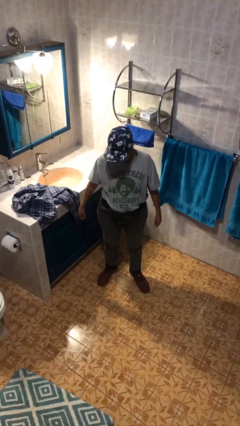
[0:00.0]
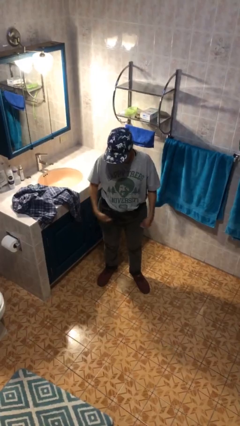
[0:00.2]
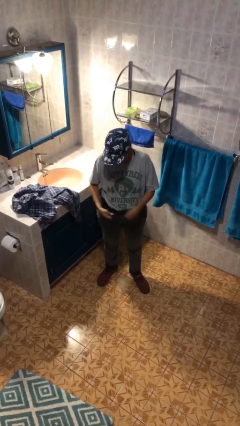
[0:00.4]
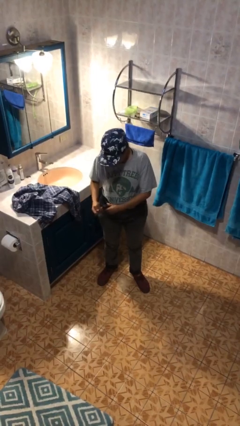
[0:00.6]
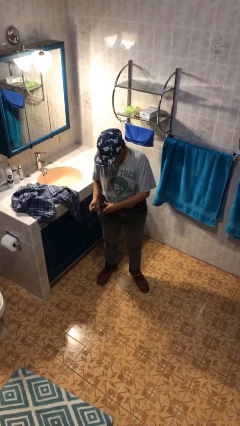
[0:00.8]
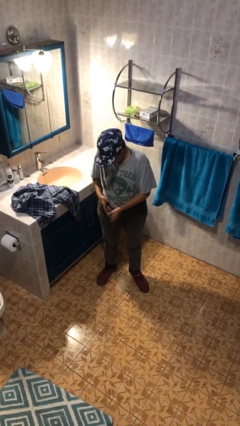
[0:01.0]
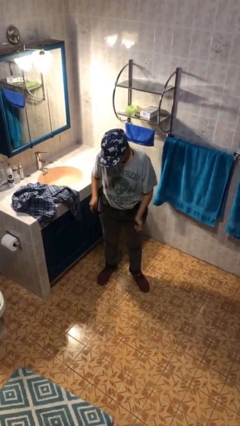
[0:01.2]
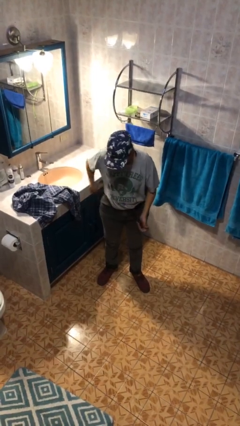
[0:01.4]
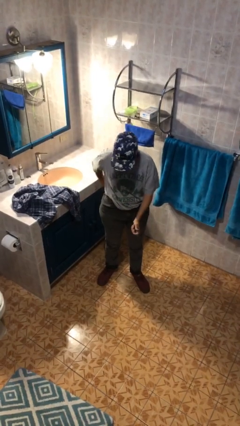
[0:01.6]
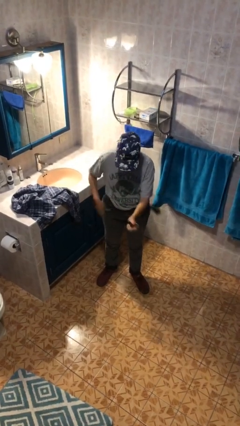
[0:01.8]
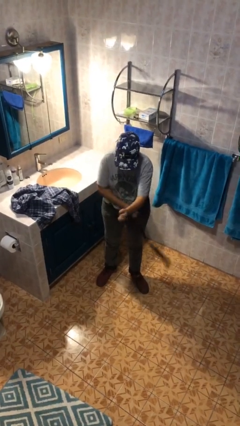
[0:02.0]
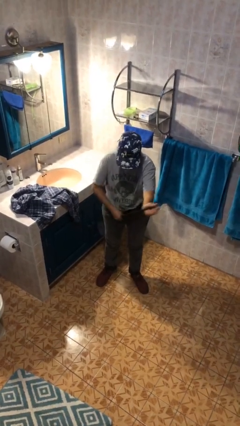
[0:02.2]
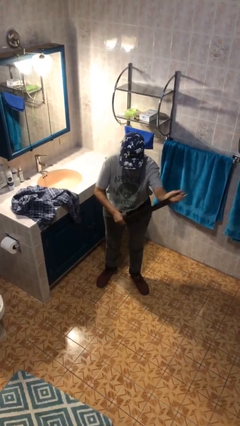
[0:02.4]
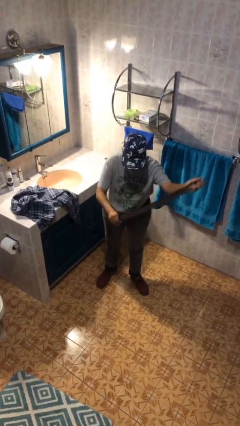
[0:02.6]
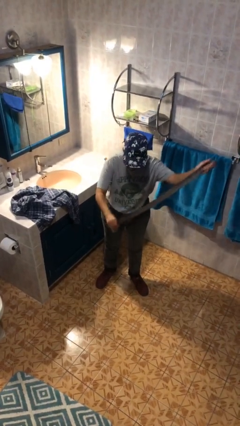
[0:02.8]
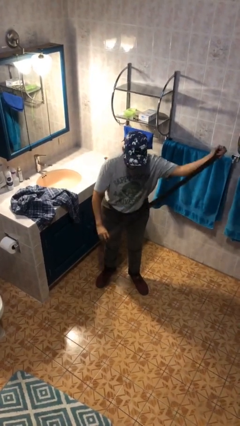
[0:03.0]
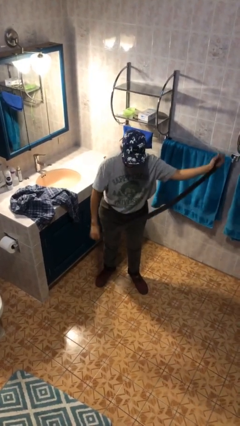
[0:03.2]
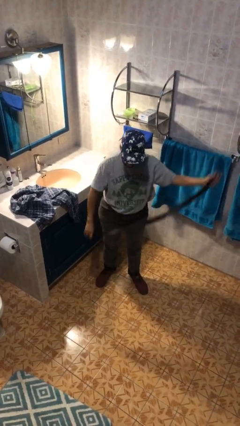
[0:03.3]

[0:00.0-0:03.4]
person takes off belt

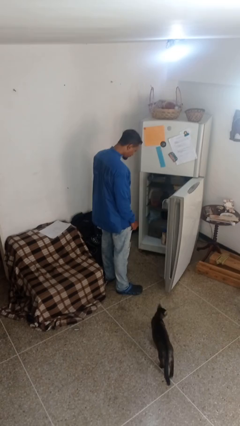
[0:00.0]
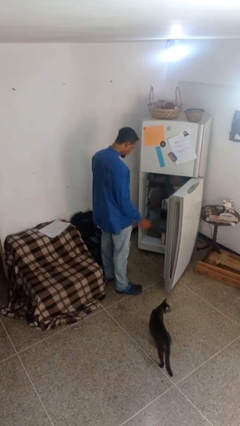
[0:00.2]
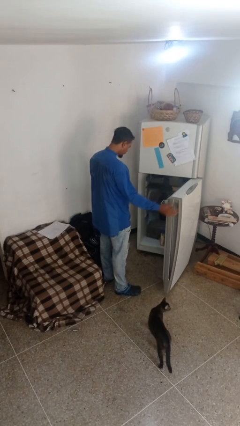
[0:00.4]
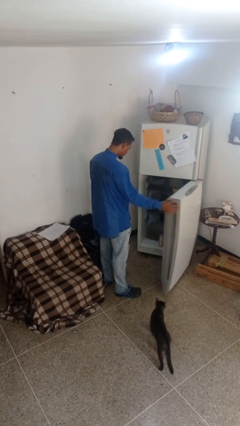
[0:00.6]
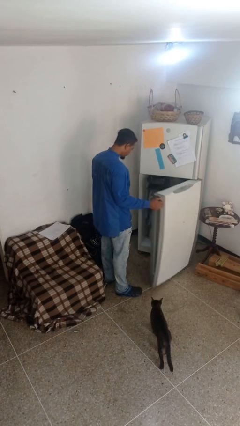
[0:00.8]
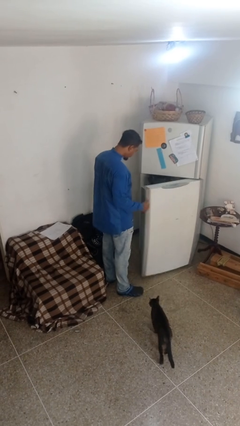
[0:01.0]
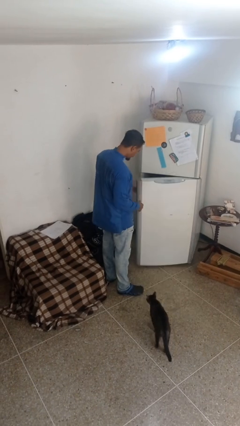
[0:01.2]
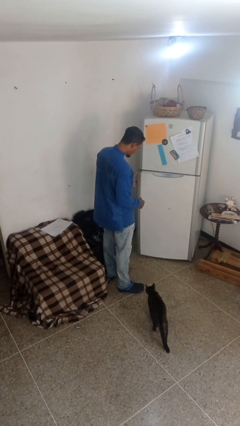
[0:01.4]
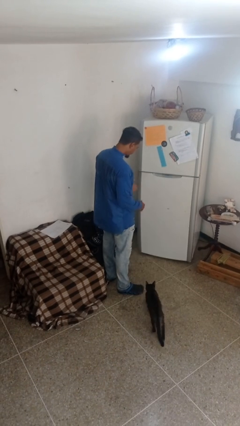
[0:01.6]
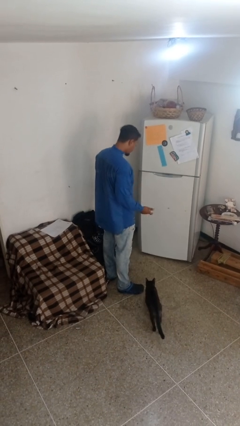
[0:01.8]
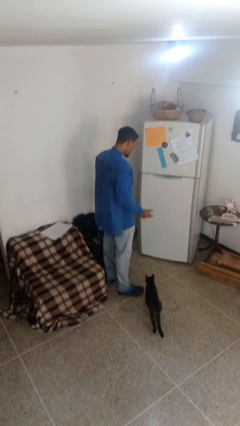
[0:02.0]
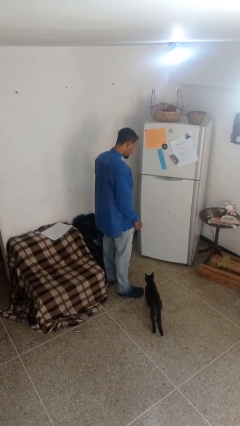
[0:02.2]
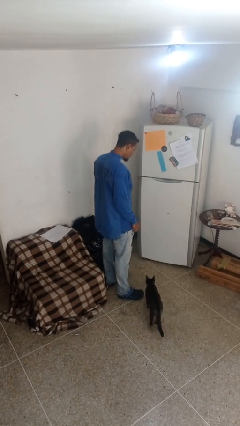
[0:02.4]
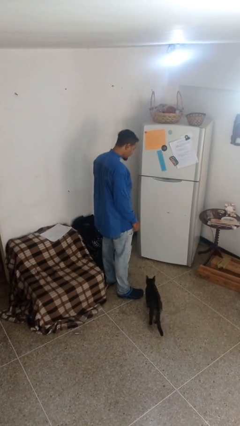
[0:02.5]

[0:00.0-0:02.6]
person closes refrigerator

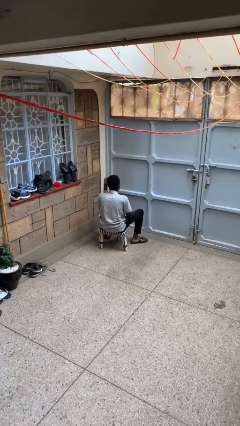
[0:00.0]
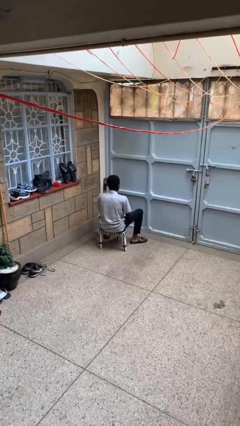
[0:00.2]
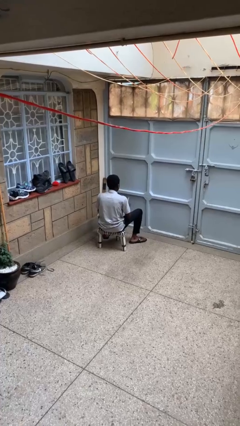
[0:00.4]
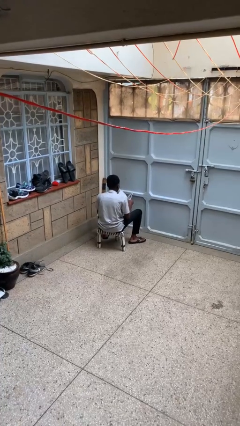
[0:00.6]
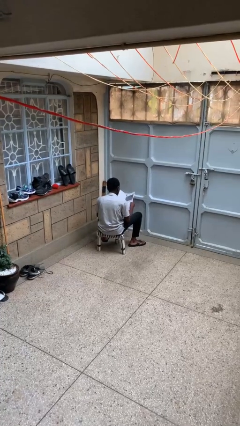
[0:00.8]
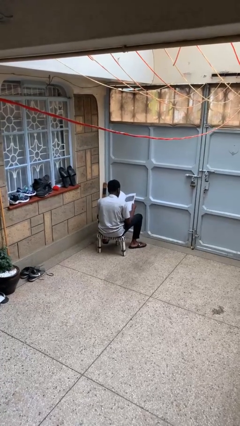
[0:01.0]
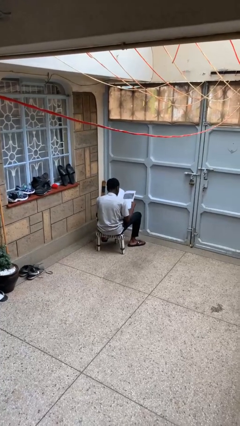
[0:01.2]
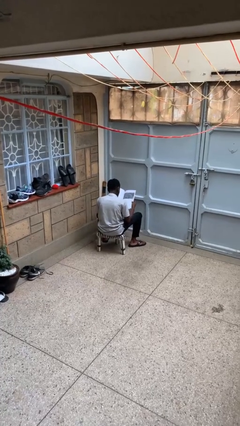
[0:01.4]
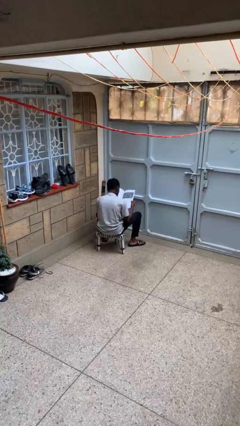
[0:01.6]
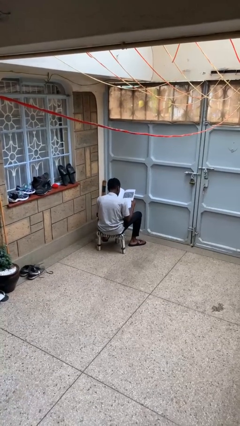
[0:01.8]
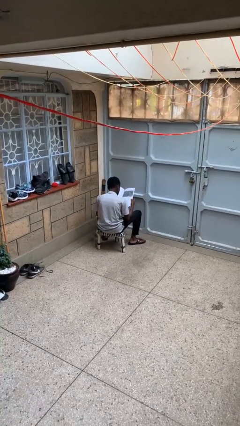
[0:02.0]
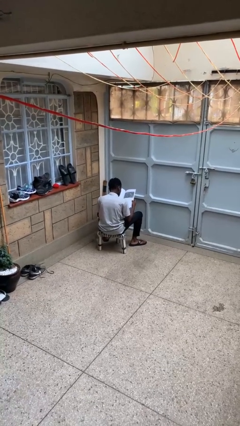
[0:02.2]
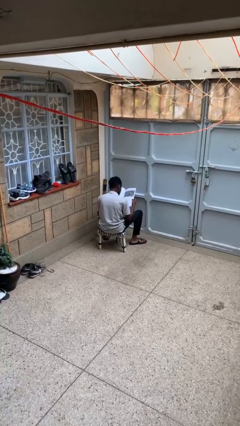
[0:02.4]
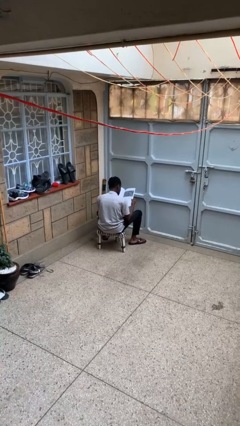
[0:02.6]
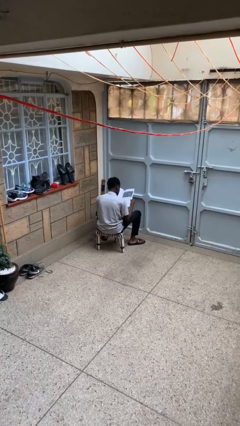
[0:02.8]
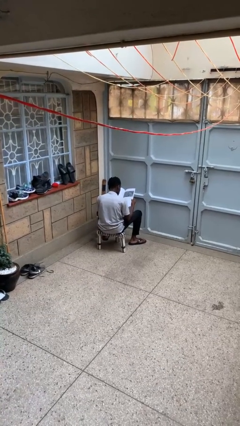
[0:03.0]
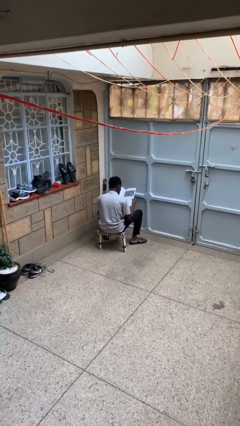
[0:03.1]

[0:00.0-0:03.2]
person reads newspaper

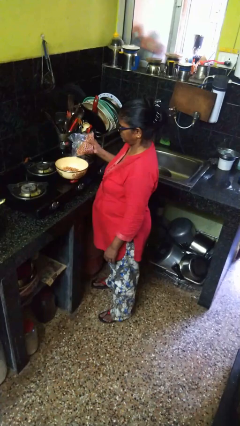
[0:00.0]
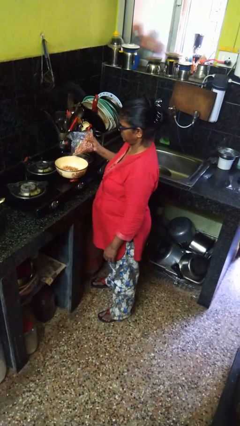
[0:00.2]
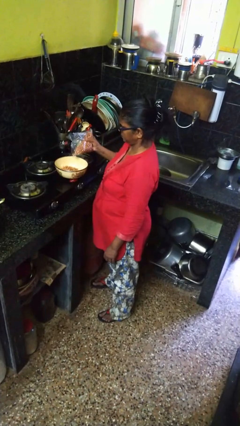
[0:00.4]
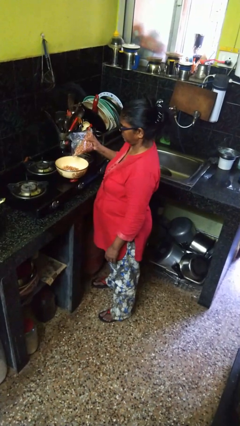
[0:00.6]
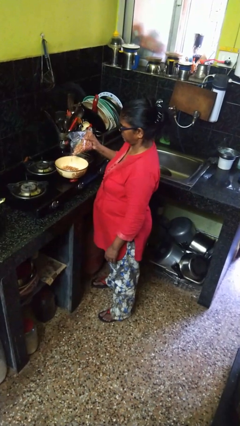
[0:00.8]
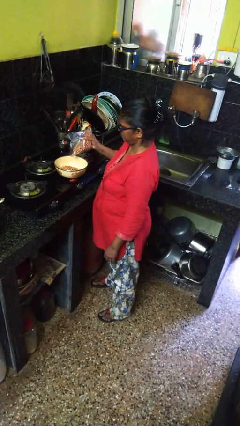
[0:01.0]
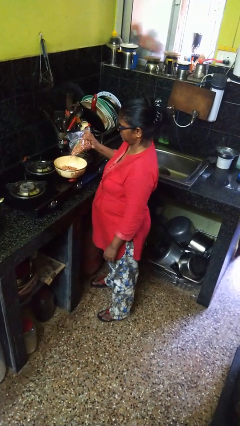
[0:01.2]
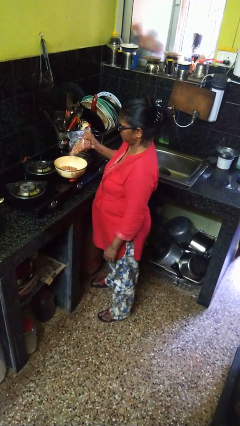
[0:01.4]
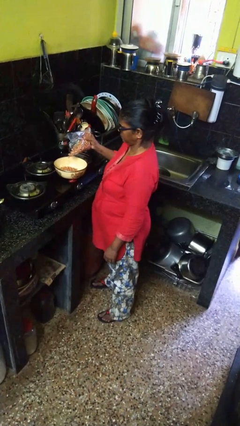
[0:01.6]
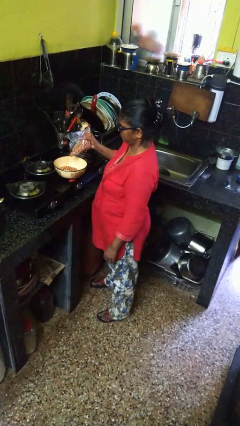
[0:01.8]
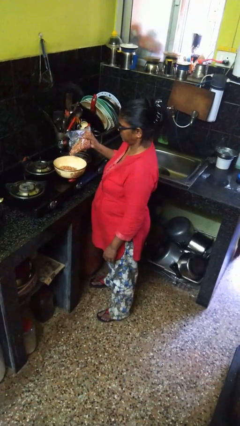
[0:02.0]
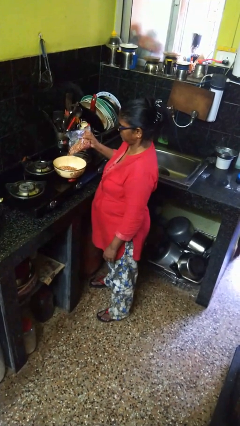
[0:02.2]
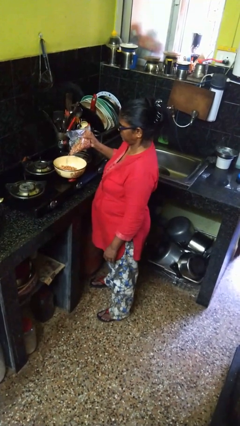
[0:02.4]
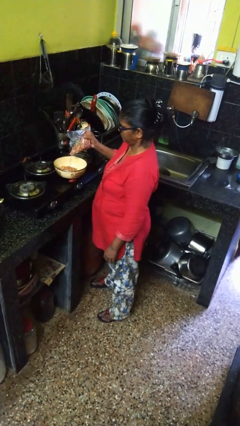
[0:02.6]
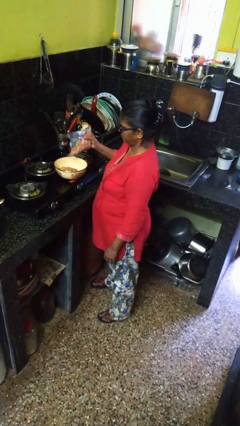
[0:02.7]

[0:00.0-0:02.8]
person pours into bowl

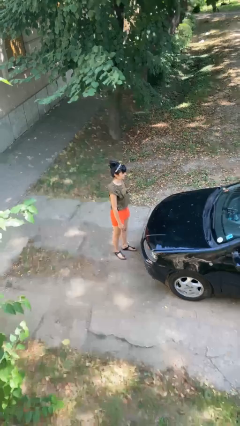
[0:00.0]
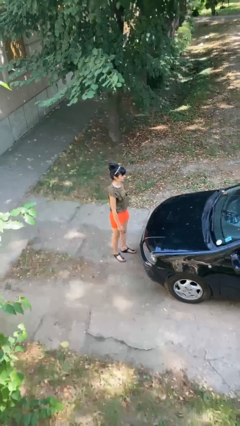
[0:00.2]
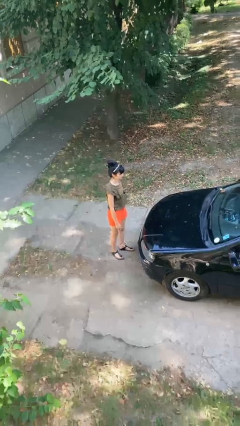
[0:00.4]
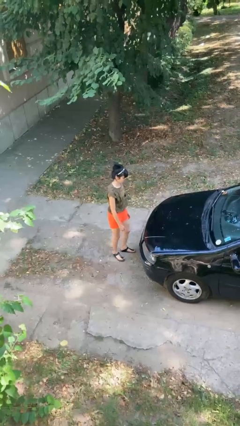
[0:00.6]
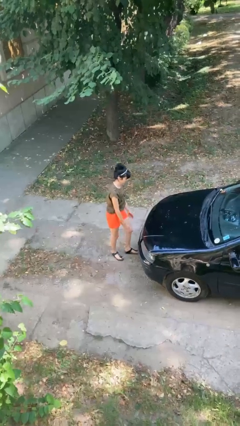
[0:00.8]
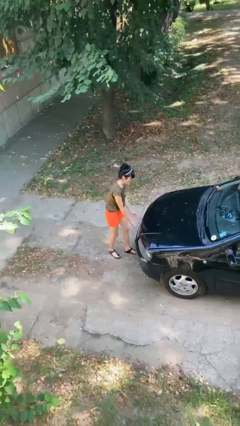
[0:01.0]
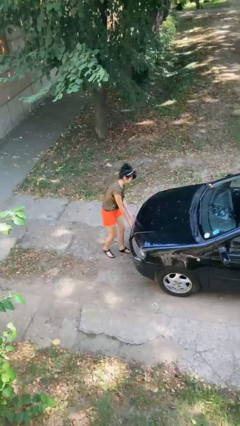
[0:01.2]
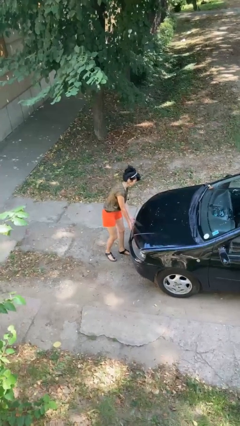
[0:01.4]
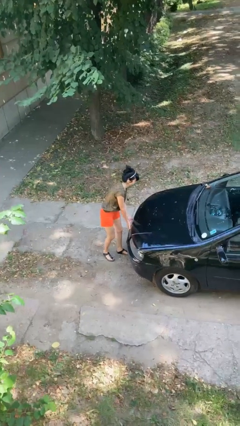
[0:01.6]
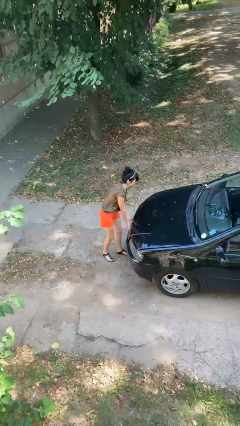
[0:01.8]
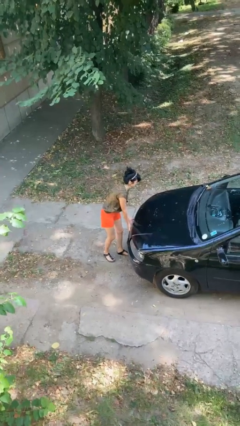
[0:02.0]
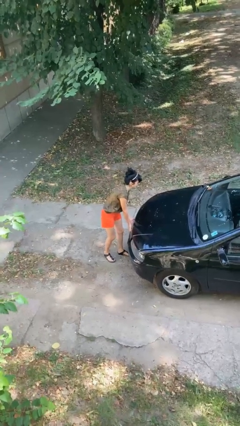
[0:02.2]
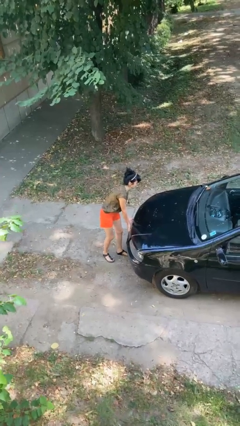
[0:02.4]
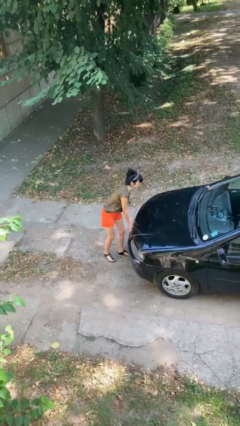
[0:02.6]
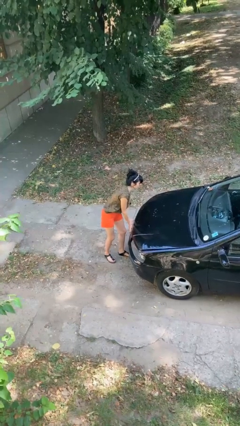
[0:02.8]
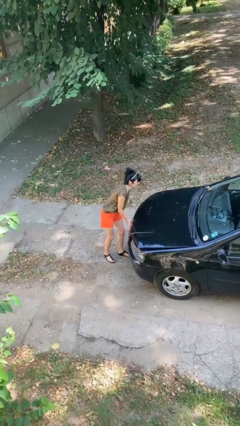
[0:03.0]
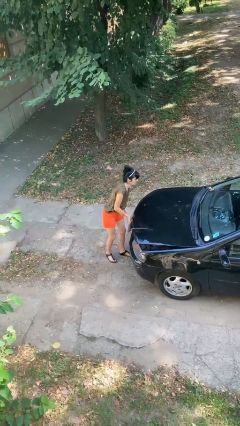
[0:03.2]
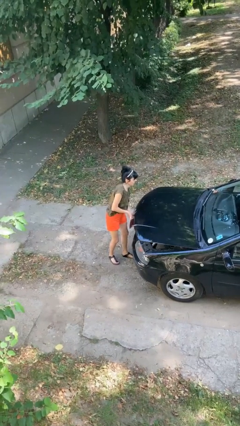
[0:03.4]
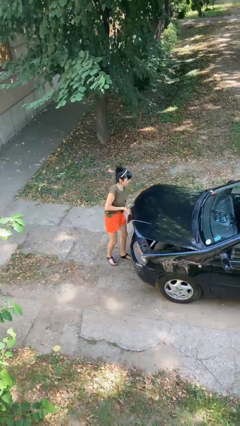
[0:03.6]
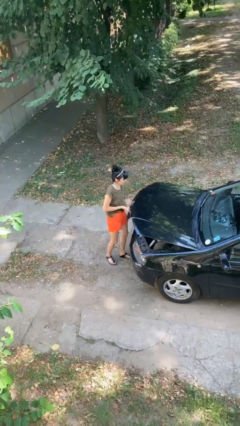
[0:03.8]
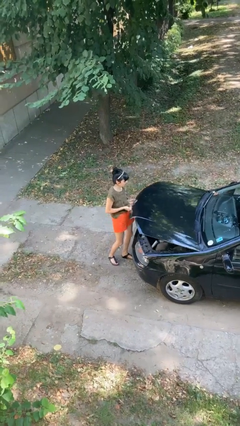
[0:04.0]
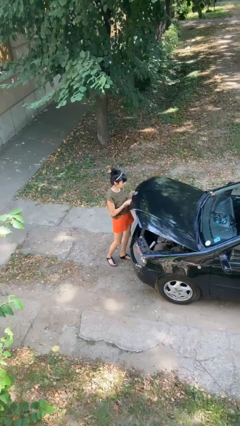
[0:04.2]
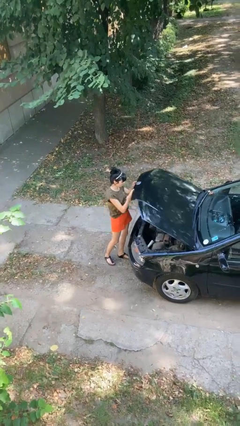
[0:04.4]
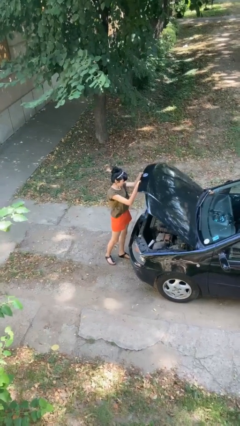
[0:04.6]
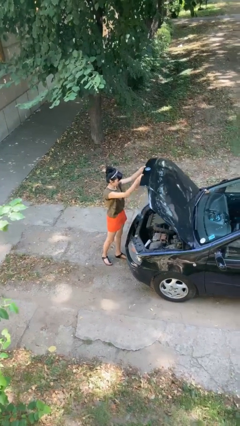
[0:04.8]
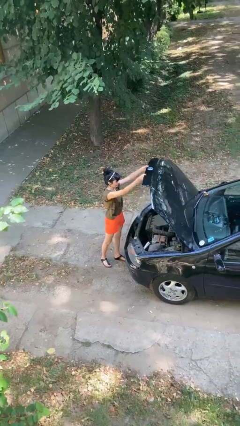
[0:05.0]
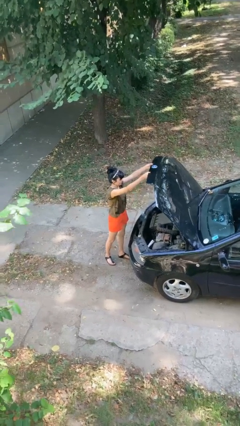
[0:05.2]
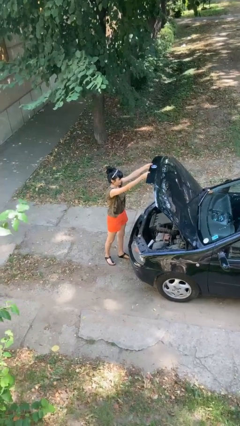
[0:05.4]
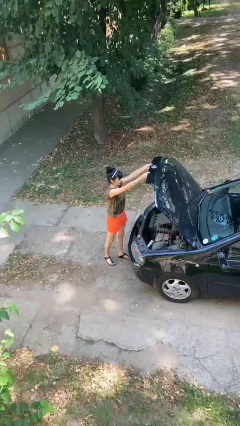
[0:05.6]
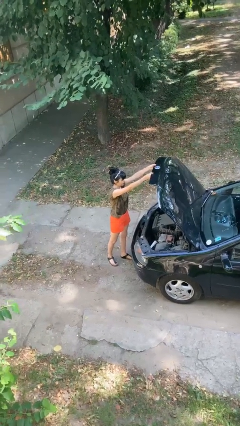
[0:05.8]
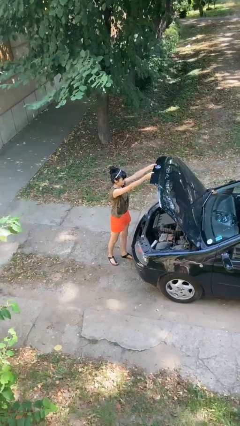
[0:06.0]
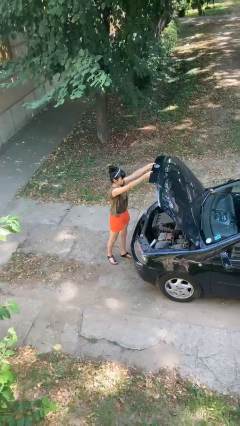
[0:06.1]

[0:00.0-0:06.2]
person opens car hood
